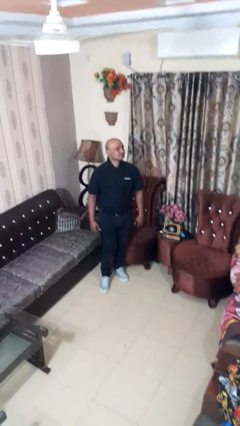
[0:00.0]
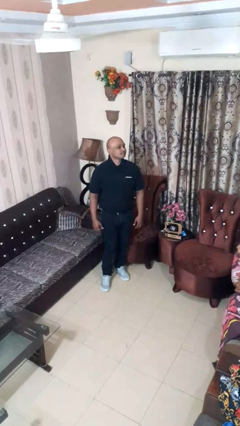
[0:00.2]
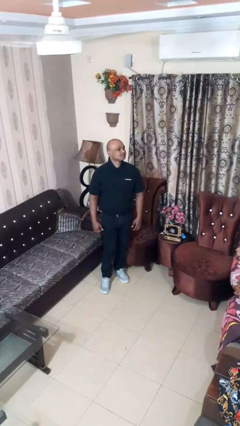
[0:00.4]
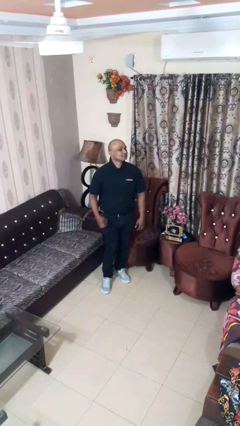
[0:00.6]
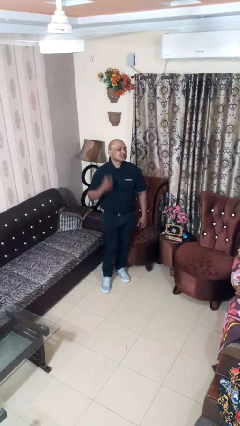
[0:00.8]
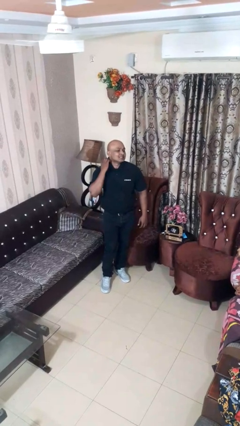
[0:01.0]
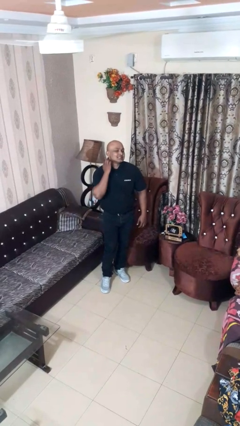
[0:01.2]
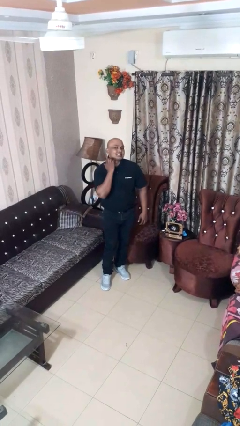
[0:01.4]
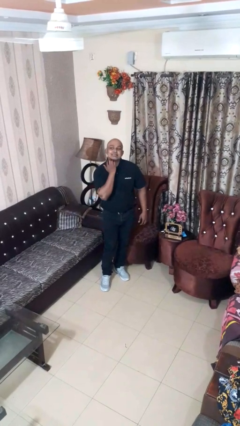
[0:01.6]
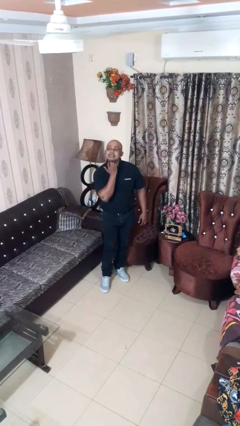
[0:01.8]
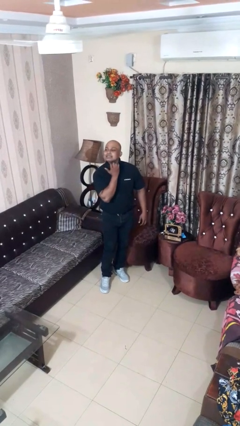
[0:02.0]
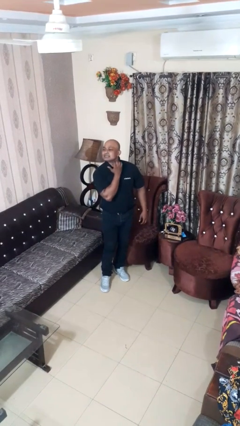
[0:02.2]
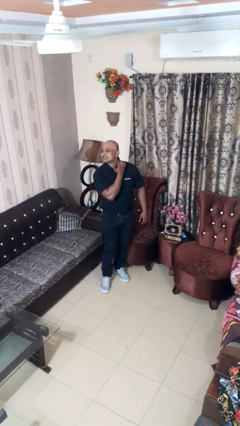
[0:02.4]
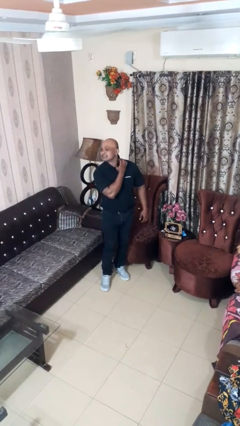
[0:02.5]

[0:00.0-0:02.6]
person gestures cut

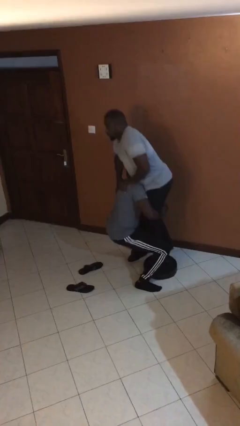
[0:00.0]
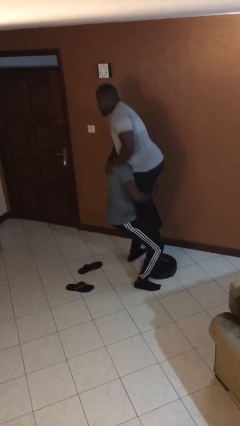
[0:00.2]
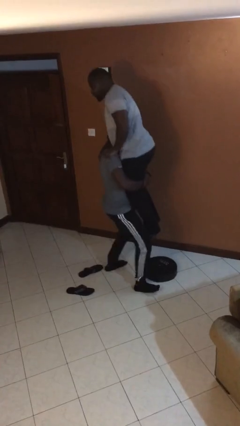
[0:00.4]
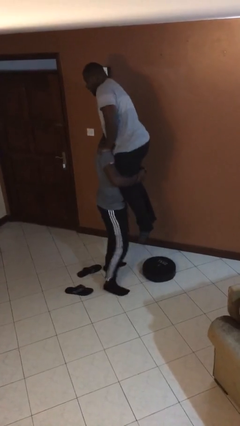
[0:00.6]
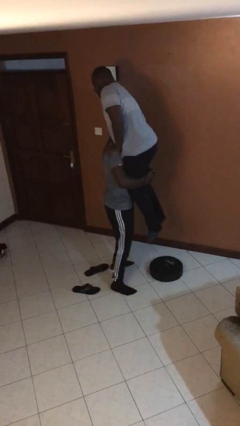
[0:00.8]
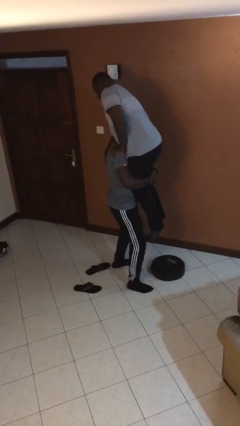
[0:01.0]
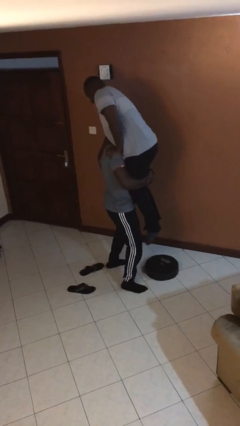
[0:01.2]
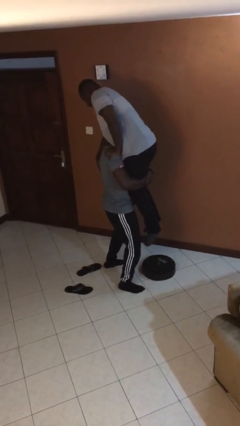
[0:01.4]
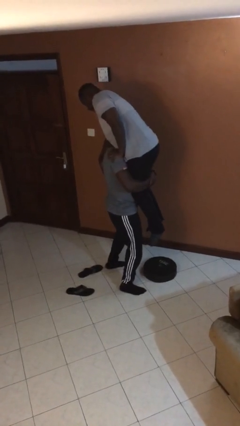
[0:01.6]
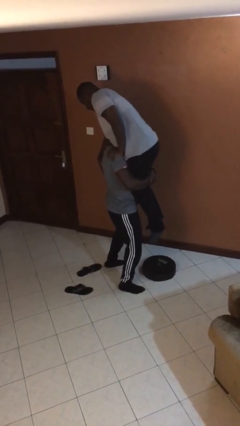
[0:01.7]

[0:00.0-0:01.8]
person picks up person

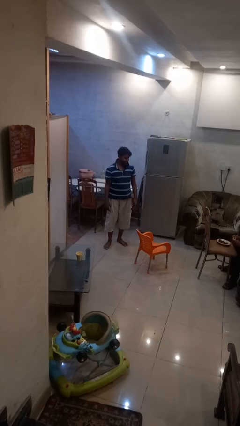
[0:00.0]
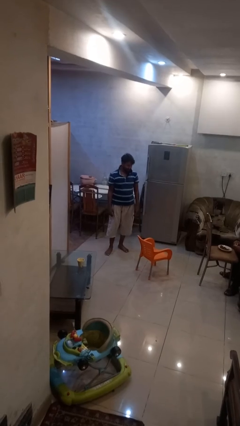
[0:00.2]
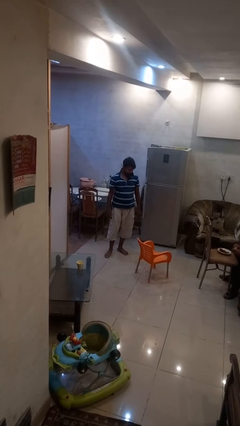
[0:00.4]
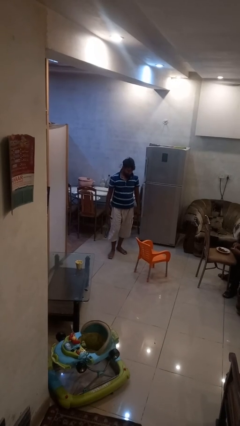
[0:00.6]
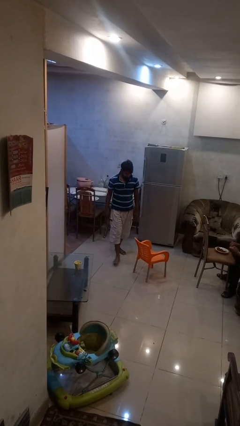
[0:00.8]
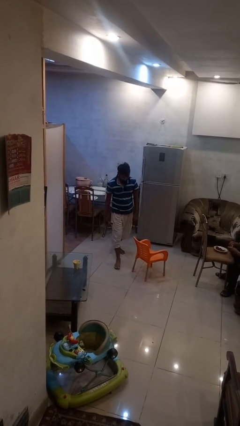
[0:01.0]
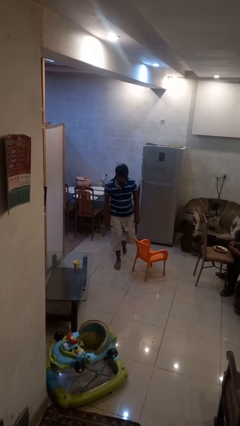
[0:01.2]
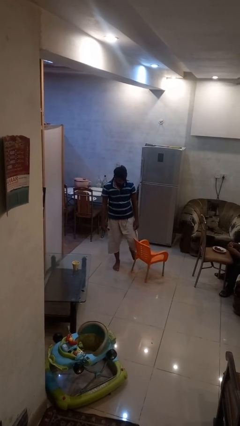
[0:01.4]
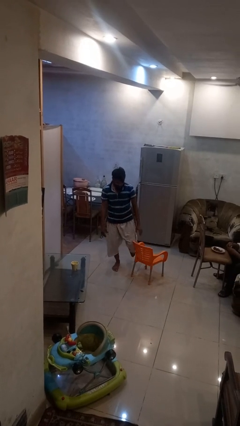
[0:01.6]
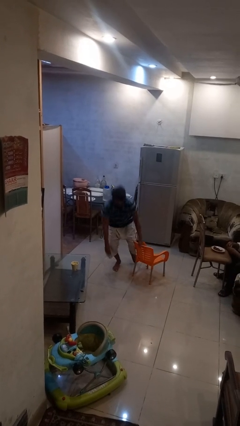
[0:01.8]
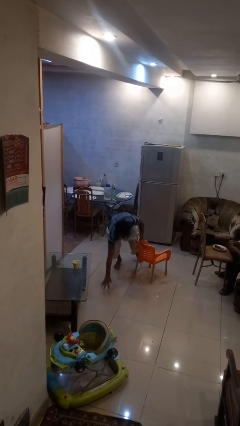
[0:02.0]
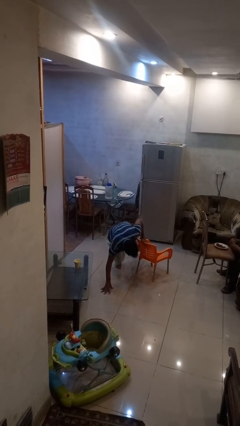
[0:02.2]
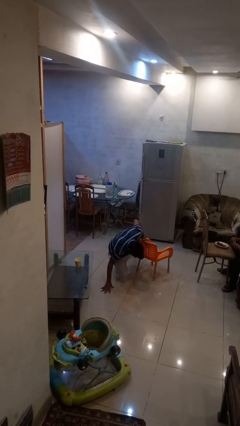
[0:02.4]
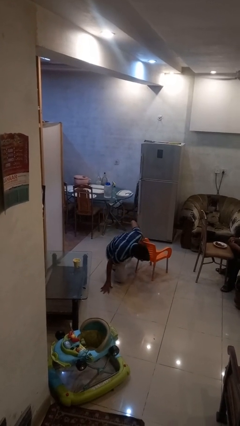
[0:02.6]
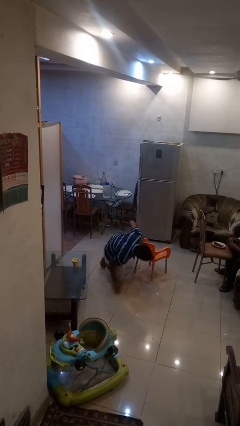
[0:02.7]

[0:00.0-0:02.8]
person trips on object on floor

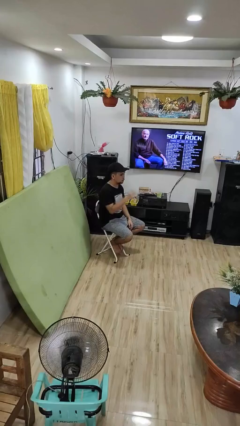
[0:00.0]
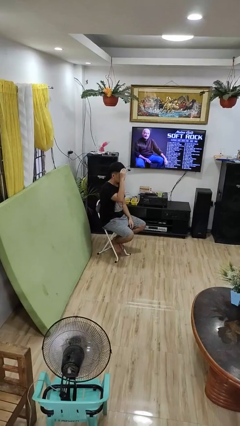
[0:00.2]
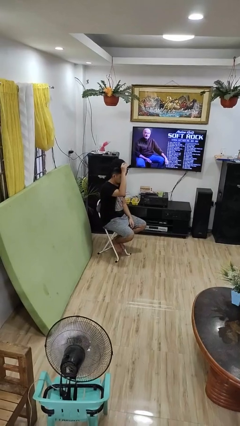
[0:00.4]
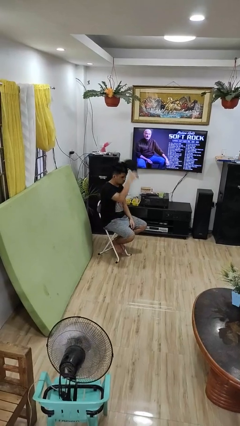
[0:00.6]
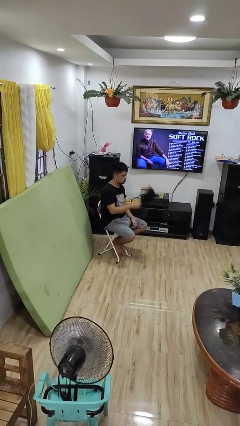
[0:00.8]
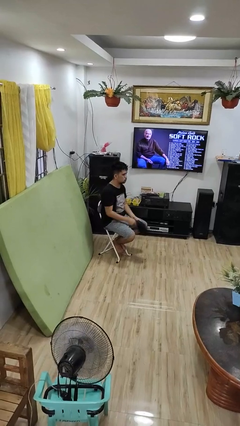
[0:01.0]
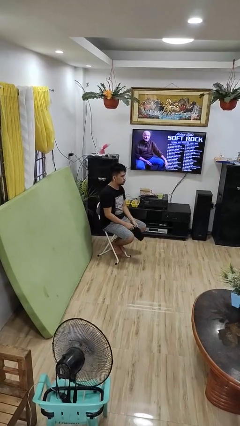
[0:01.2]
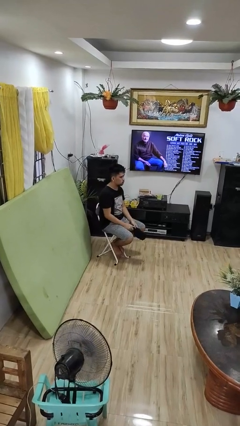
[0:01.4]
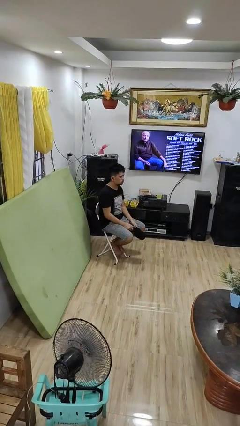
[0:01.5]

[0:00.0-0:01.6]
person takes off hat

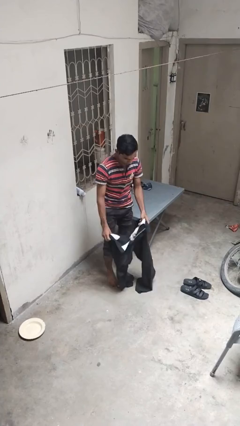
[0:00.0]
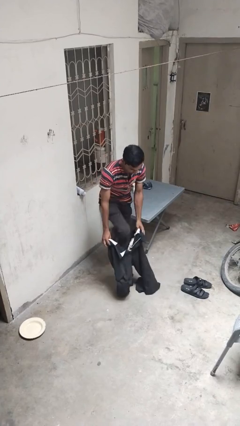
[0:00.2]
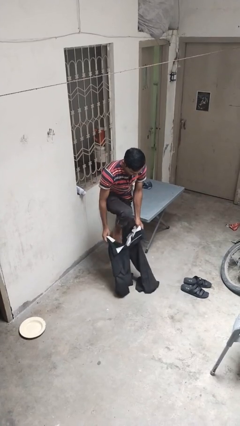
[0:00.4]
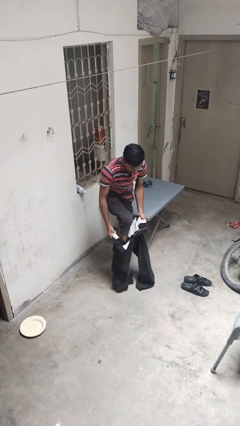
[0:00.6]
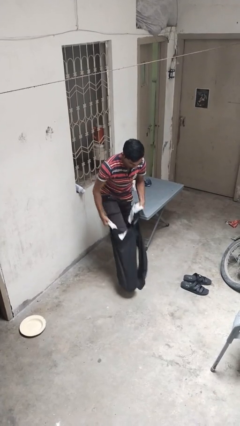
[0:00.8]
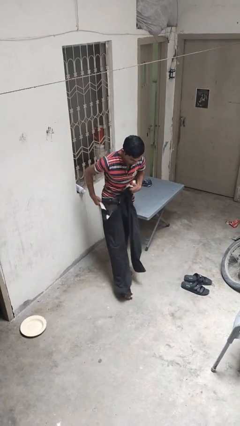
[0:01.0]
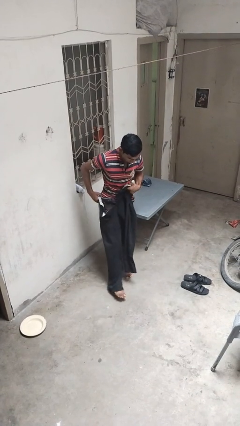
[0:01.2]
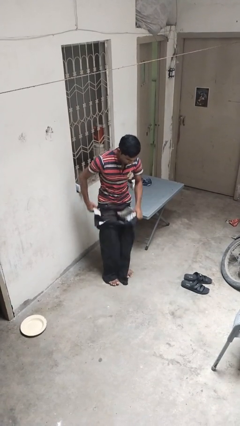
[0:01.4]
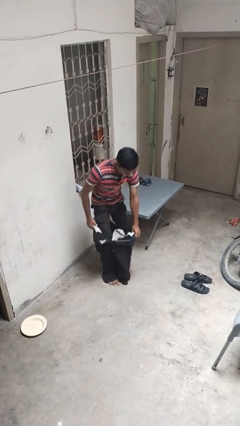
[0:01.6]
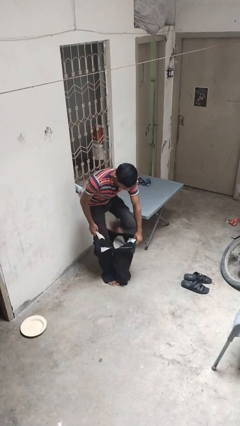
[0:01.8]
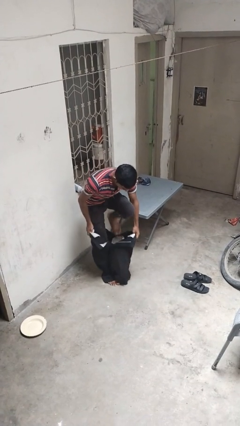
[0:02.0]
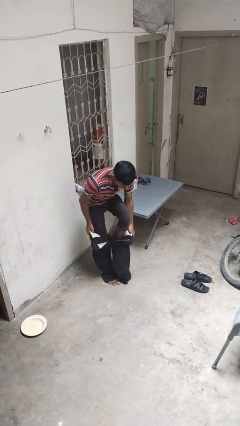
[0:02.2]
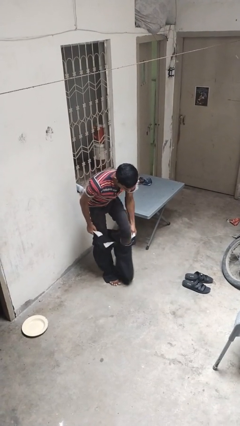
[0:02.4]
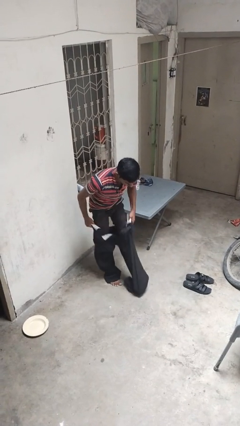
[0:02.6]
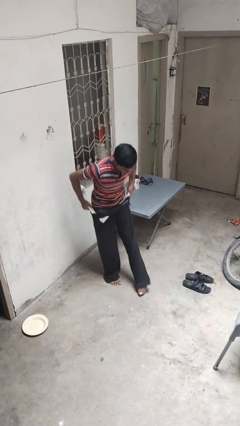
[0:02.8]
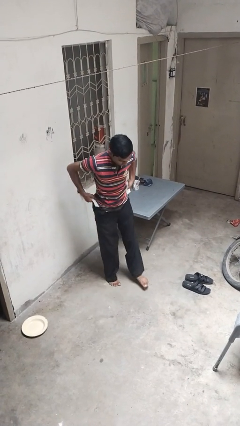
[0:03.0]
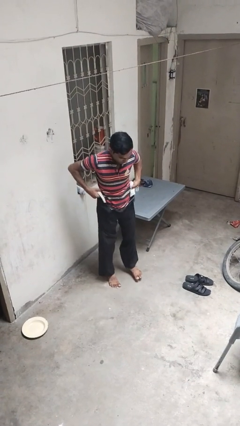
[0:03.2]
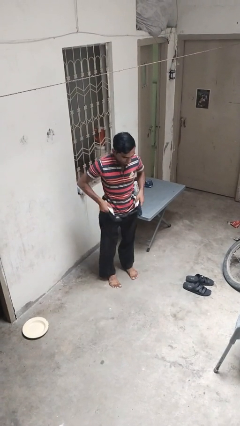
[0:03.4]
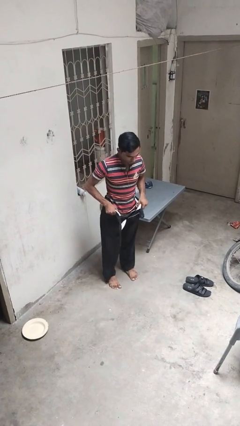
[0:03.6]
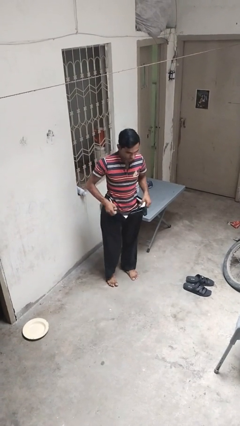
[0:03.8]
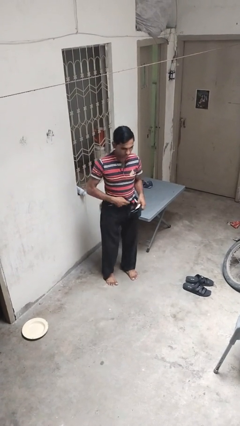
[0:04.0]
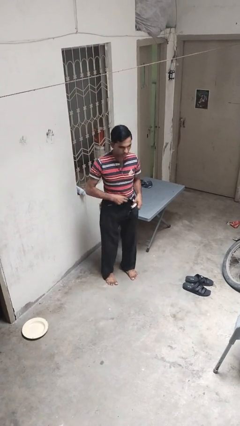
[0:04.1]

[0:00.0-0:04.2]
person puts on pants

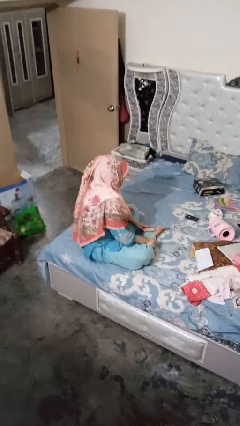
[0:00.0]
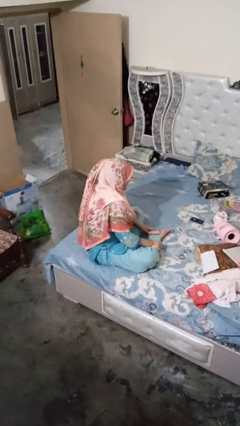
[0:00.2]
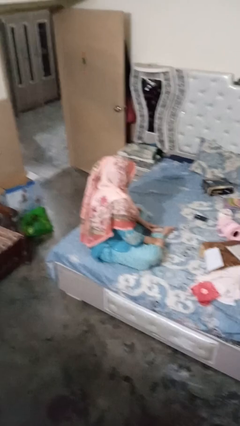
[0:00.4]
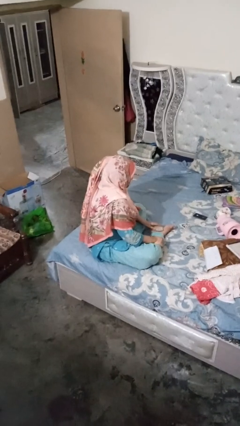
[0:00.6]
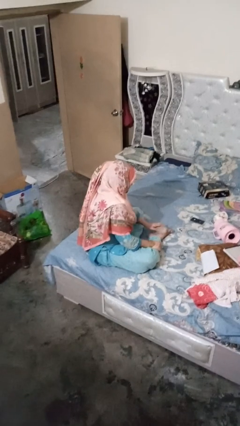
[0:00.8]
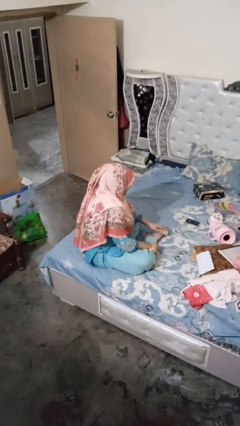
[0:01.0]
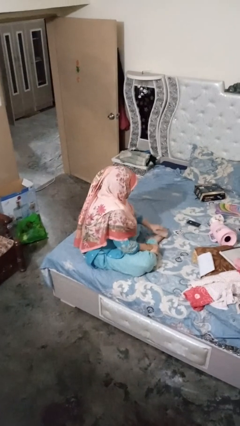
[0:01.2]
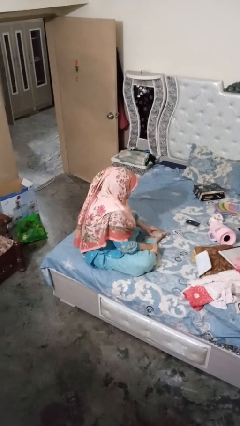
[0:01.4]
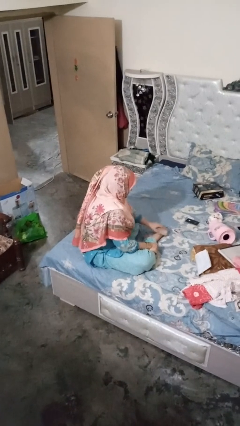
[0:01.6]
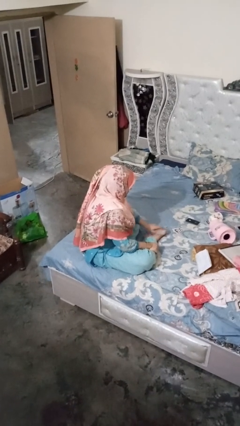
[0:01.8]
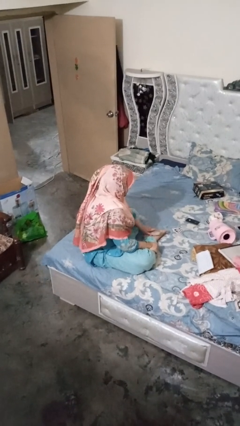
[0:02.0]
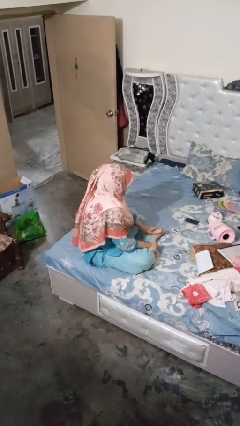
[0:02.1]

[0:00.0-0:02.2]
person rubs foot

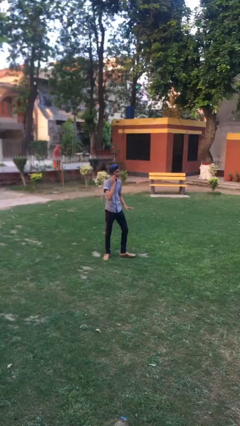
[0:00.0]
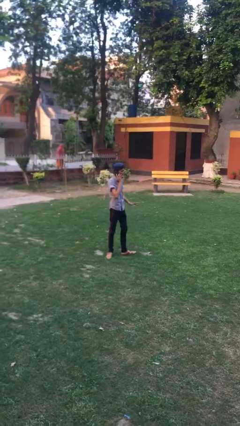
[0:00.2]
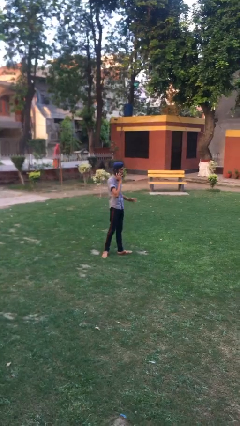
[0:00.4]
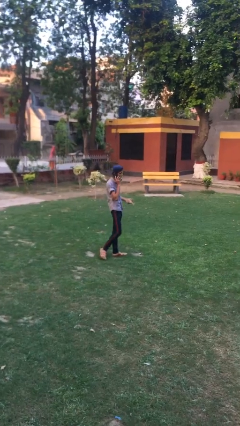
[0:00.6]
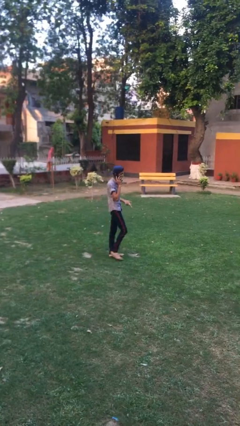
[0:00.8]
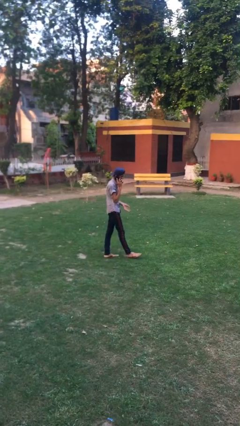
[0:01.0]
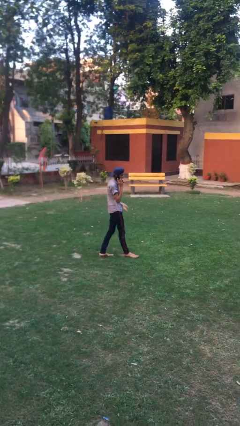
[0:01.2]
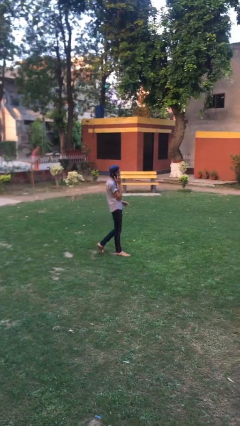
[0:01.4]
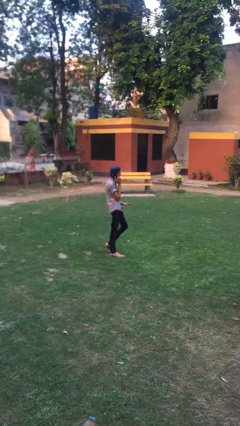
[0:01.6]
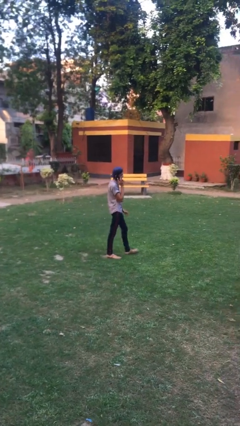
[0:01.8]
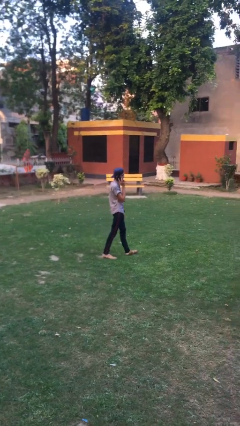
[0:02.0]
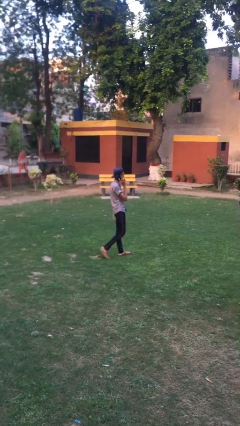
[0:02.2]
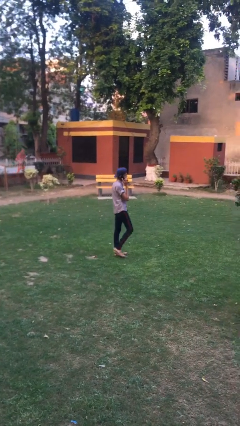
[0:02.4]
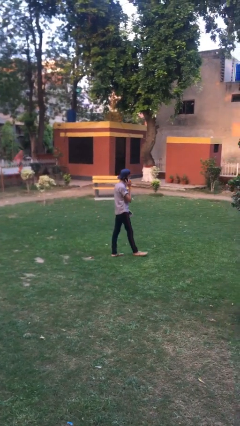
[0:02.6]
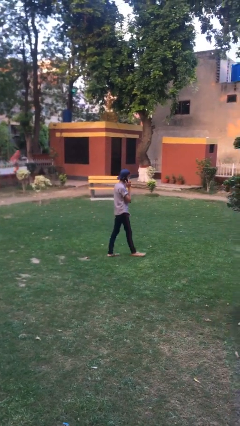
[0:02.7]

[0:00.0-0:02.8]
person talks on phone
